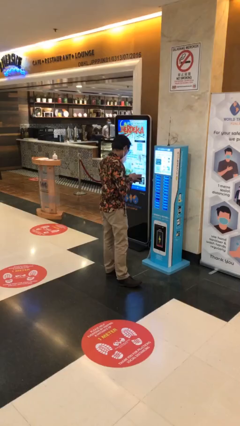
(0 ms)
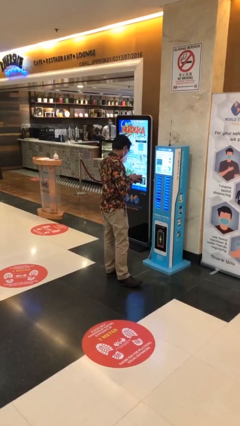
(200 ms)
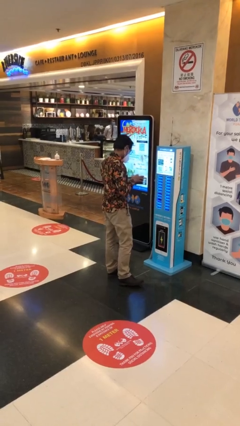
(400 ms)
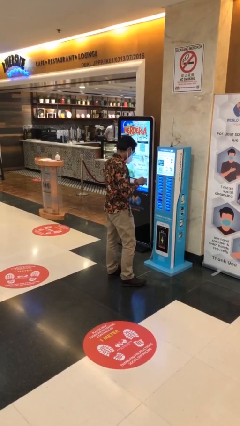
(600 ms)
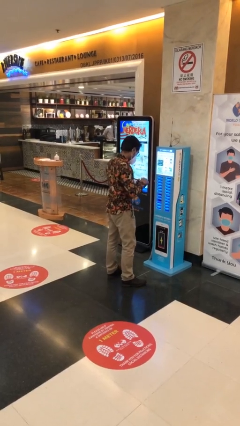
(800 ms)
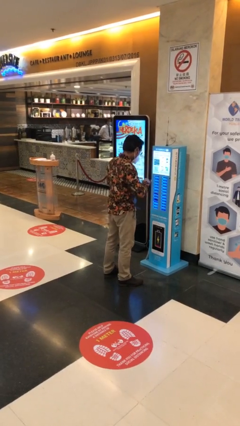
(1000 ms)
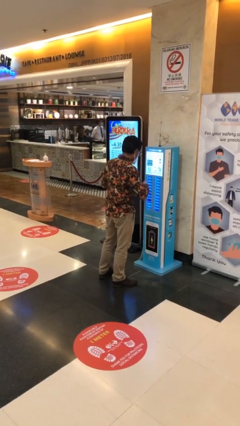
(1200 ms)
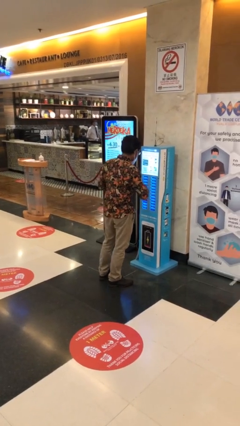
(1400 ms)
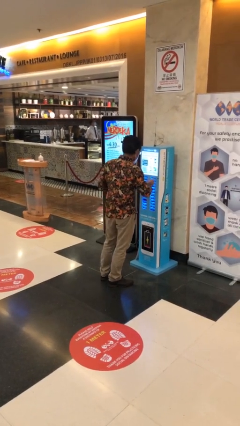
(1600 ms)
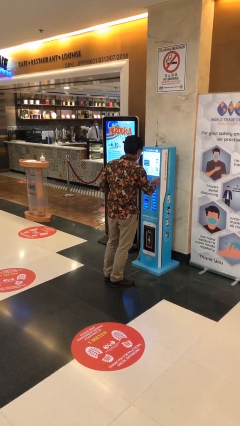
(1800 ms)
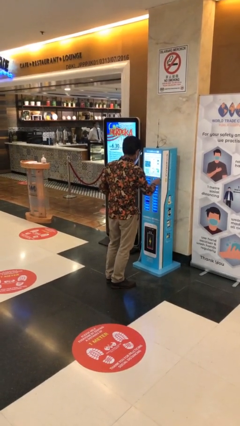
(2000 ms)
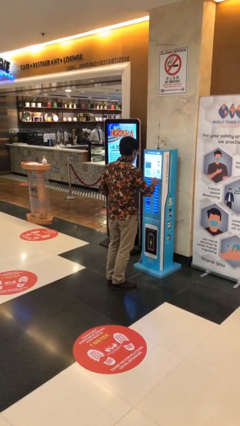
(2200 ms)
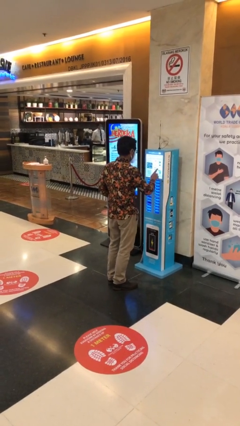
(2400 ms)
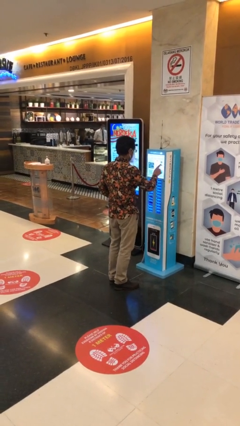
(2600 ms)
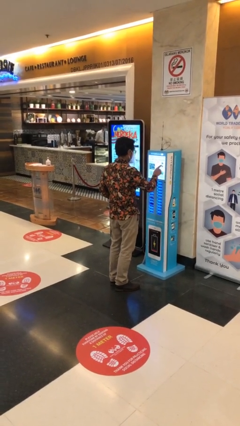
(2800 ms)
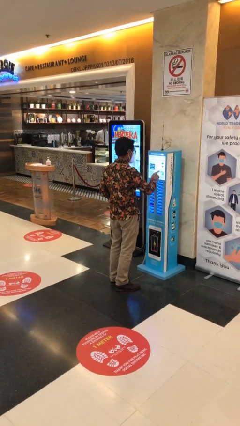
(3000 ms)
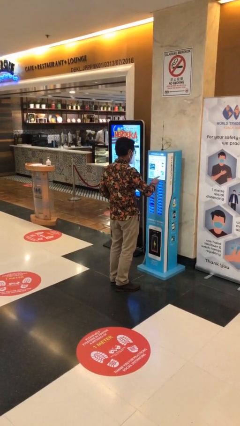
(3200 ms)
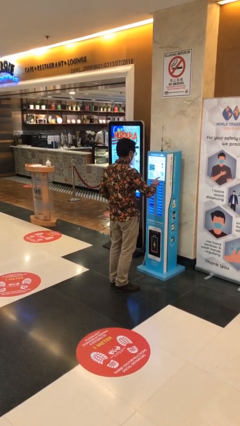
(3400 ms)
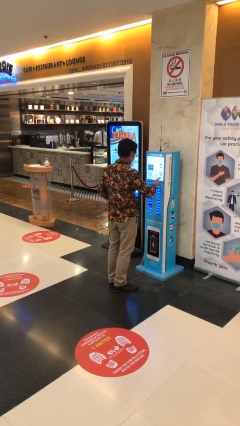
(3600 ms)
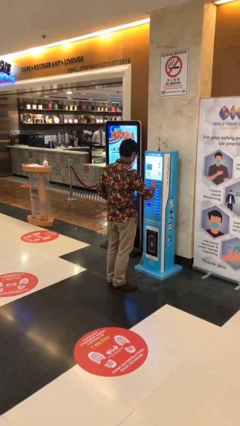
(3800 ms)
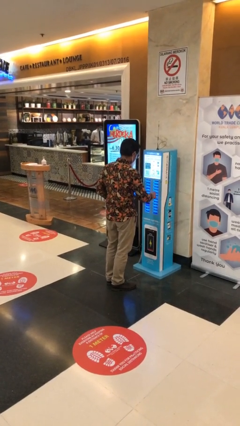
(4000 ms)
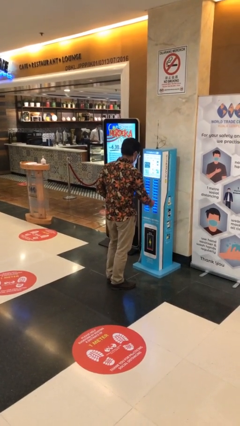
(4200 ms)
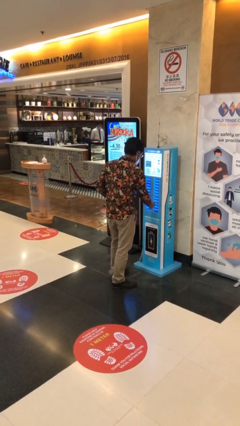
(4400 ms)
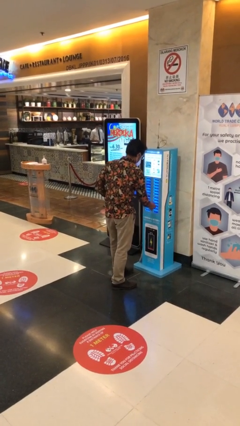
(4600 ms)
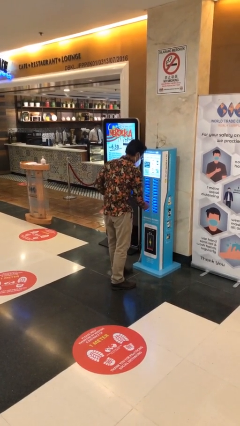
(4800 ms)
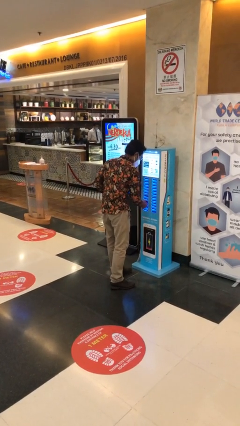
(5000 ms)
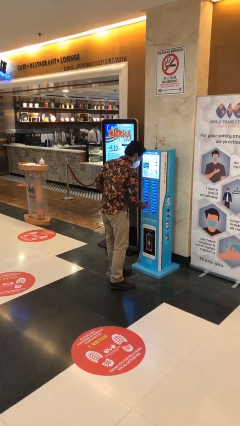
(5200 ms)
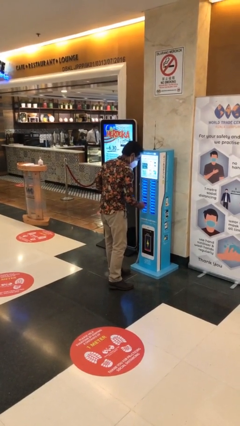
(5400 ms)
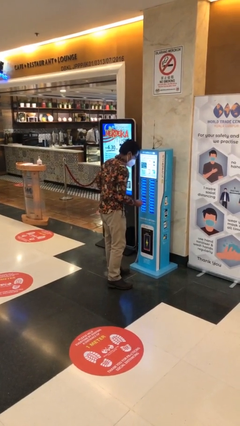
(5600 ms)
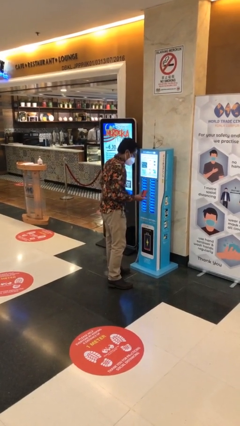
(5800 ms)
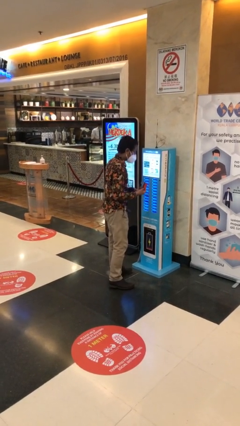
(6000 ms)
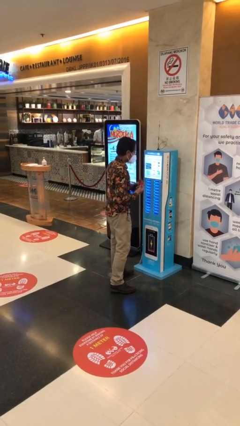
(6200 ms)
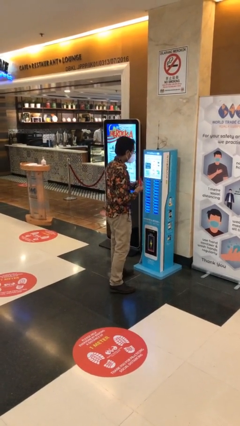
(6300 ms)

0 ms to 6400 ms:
person purchases from machine

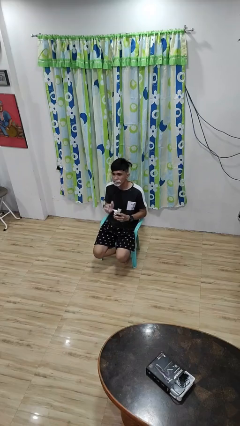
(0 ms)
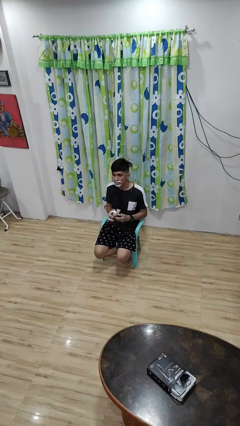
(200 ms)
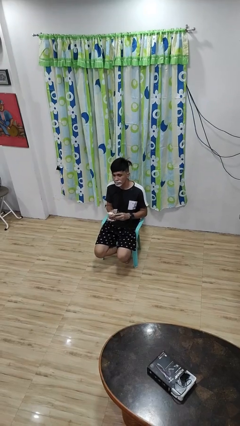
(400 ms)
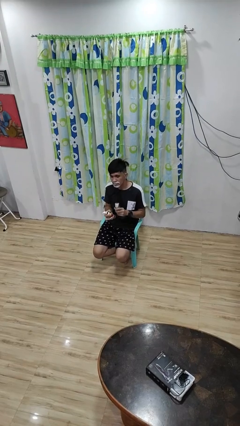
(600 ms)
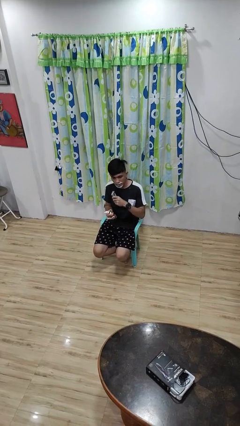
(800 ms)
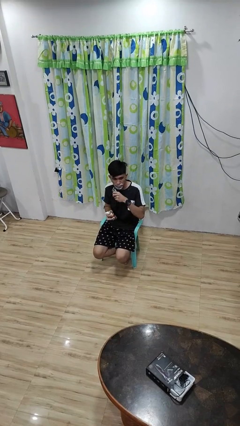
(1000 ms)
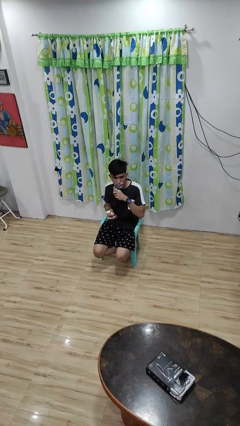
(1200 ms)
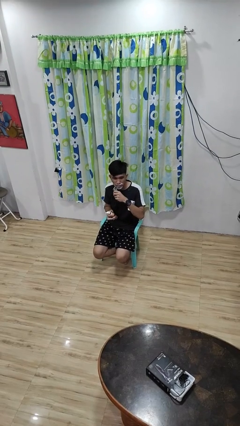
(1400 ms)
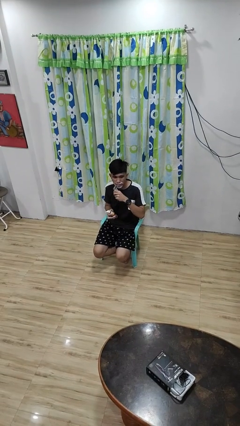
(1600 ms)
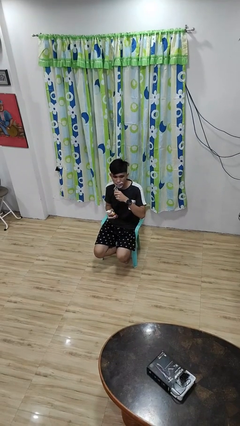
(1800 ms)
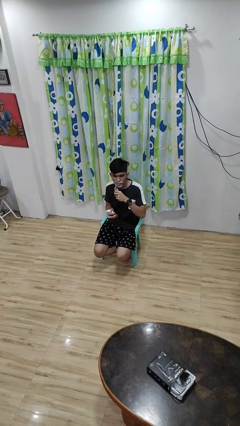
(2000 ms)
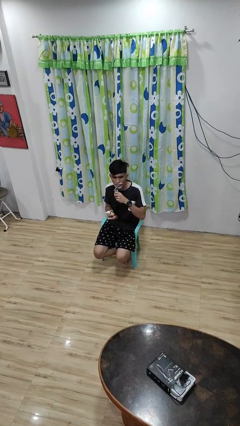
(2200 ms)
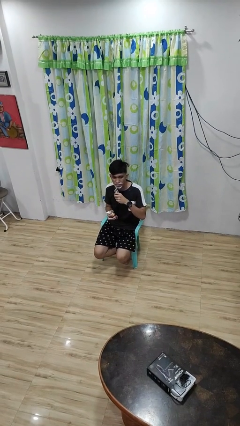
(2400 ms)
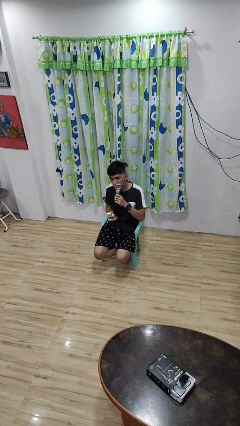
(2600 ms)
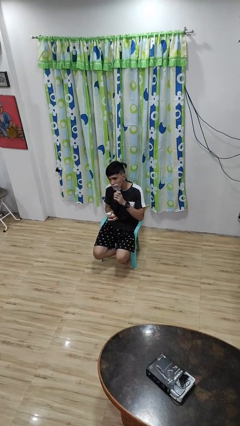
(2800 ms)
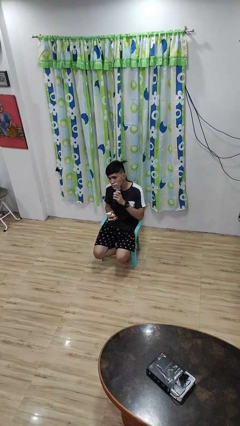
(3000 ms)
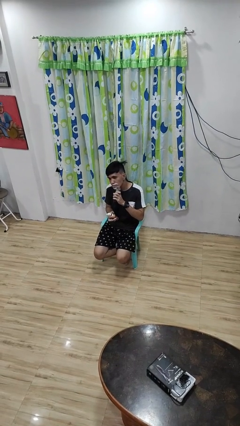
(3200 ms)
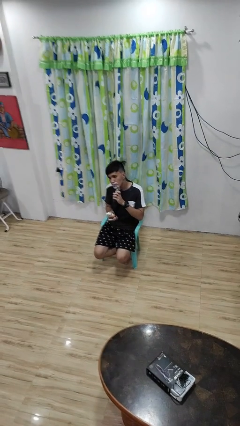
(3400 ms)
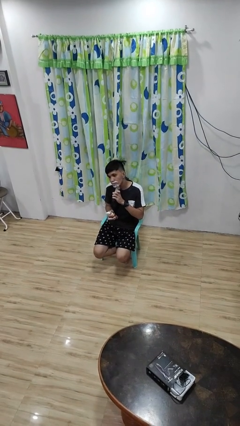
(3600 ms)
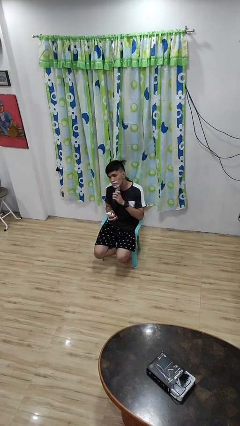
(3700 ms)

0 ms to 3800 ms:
person shaves face

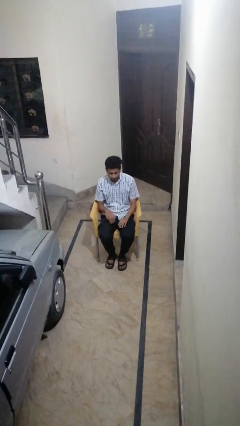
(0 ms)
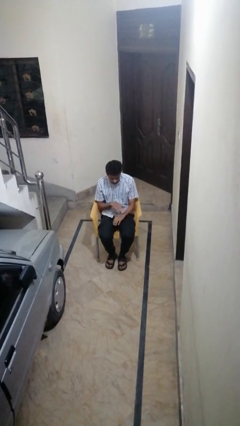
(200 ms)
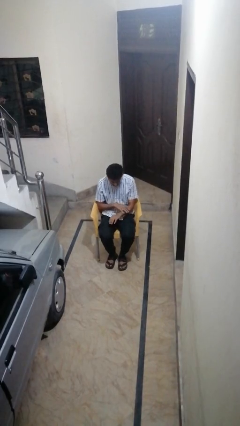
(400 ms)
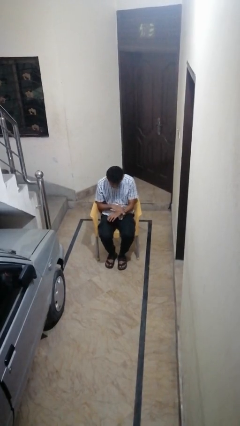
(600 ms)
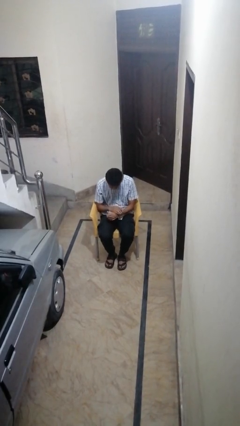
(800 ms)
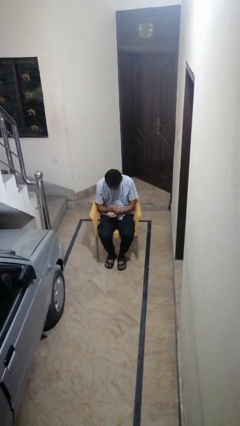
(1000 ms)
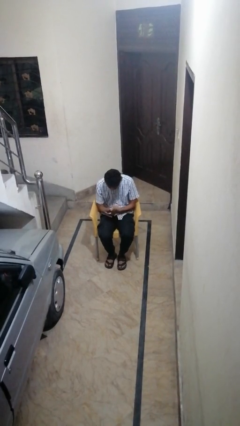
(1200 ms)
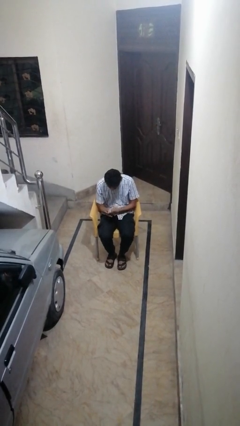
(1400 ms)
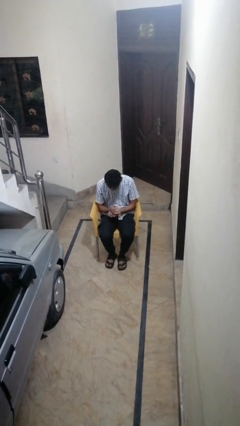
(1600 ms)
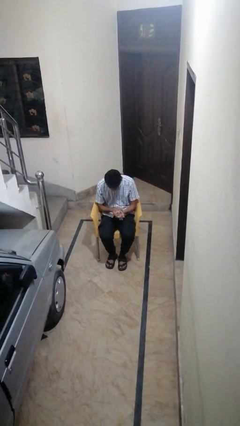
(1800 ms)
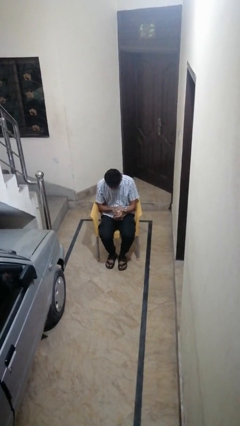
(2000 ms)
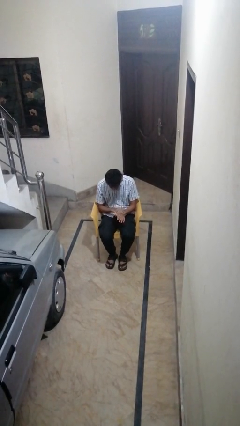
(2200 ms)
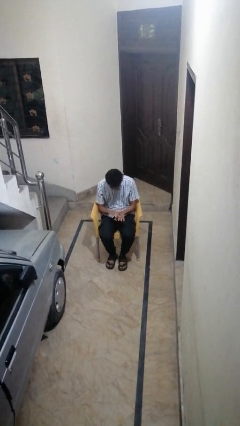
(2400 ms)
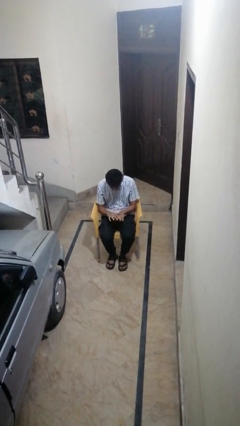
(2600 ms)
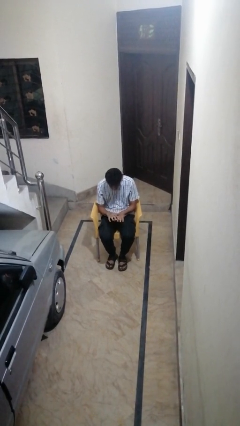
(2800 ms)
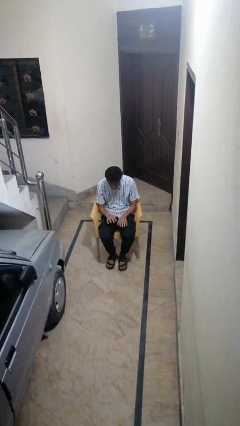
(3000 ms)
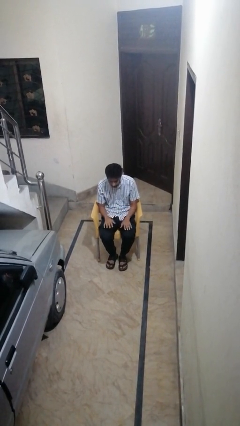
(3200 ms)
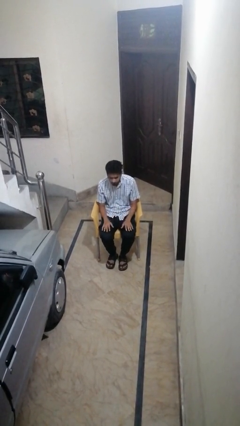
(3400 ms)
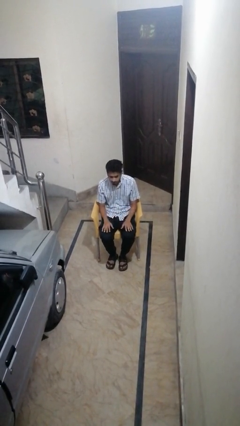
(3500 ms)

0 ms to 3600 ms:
person looks at hands in lap

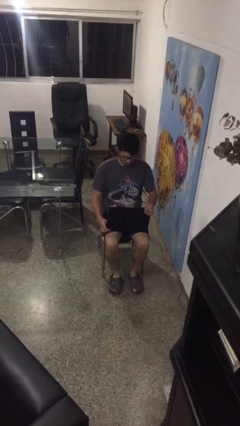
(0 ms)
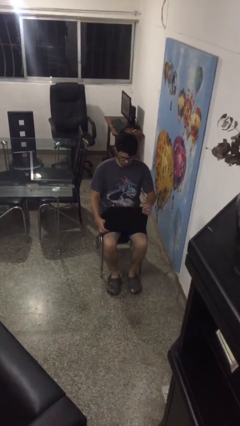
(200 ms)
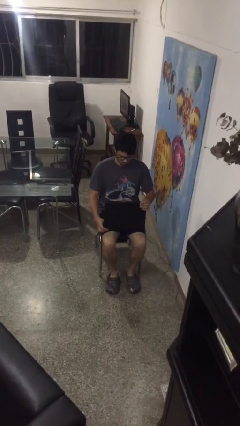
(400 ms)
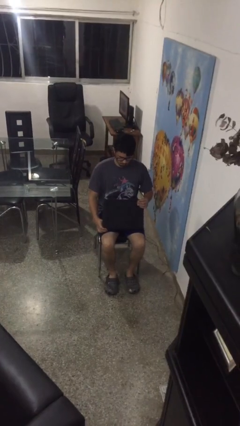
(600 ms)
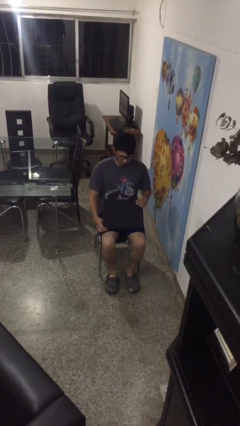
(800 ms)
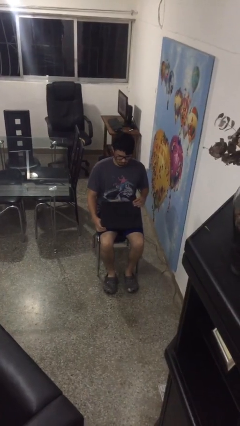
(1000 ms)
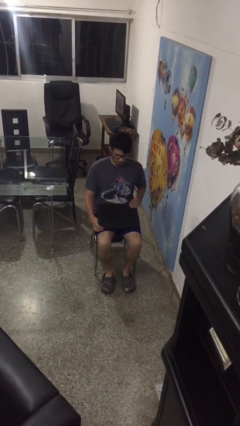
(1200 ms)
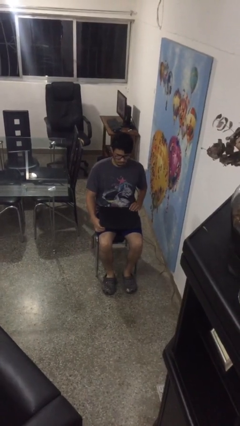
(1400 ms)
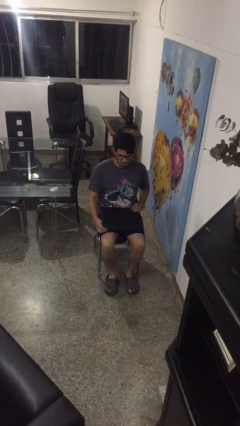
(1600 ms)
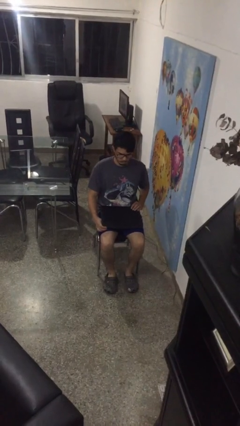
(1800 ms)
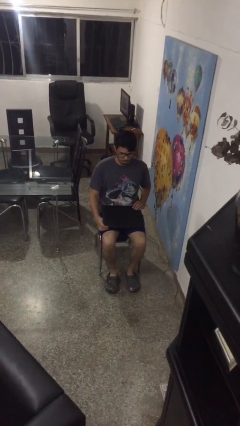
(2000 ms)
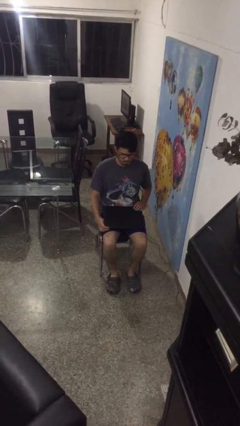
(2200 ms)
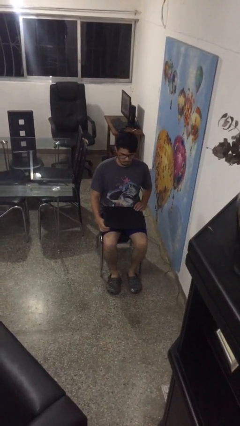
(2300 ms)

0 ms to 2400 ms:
person closes laptop

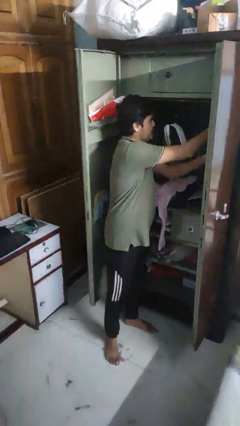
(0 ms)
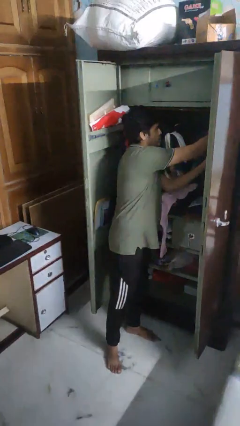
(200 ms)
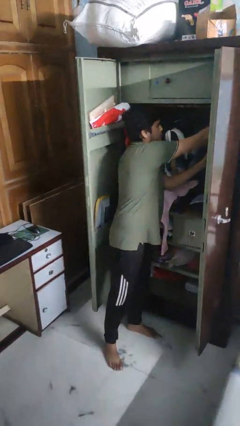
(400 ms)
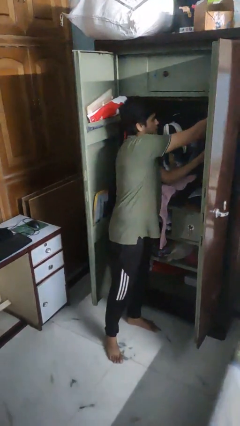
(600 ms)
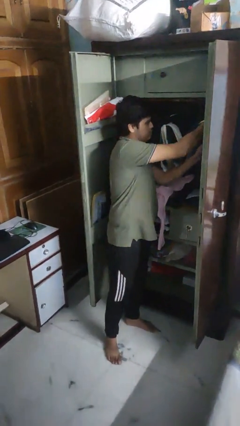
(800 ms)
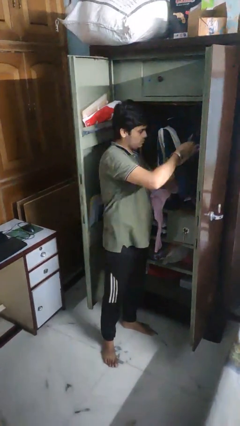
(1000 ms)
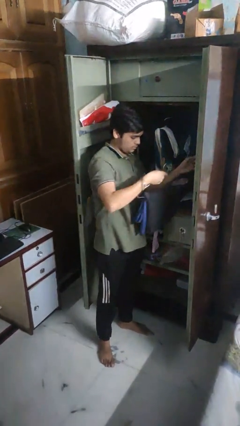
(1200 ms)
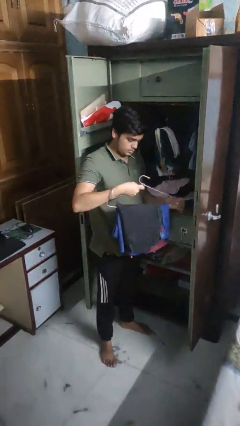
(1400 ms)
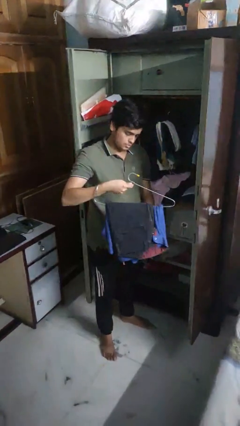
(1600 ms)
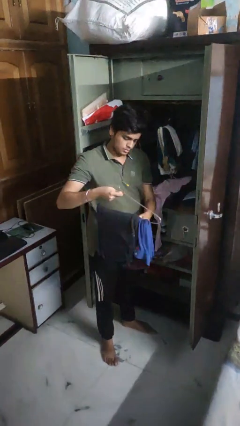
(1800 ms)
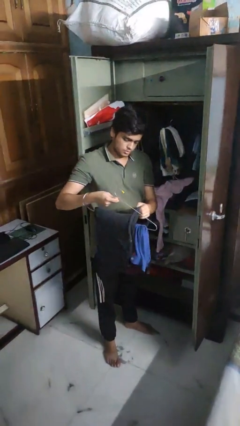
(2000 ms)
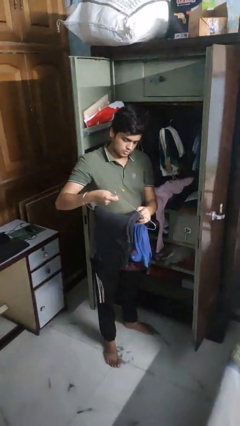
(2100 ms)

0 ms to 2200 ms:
person takes clothes from closet
